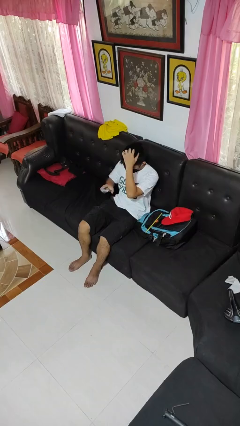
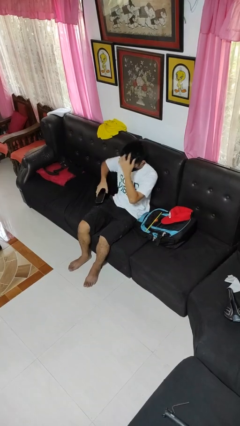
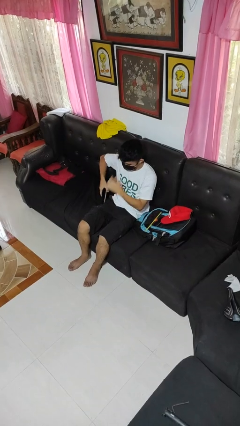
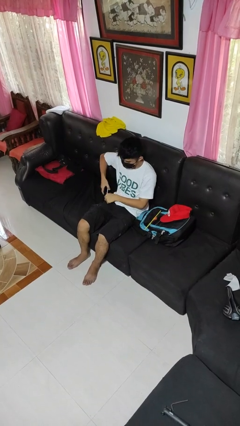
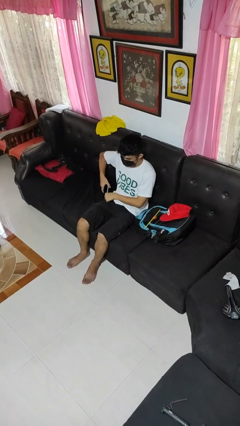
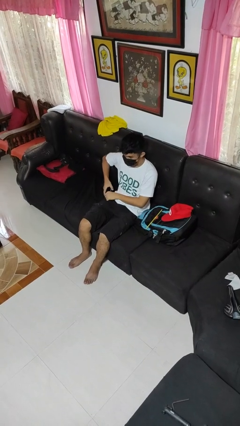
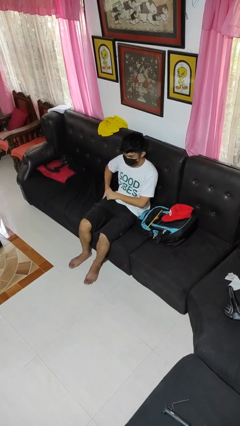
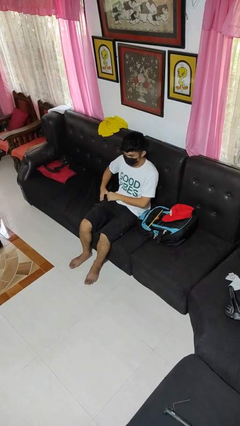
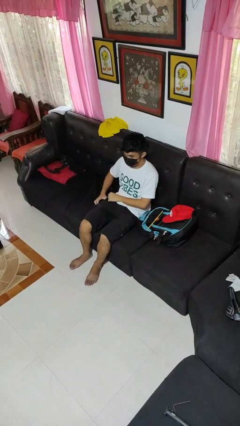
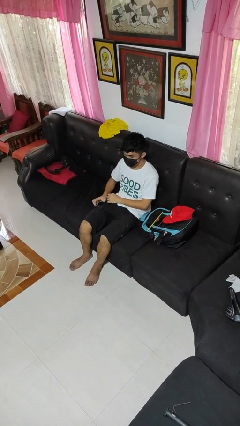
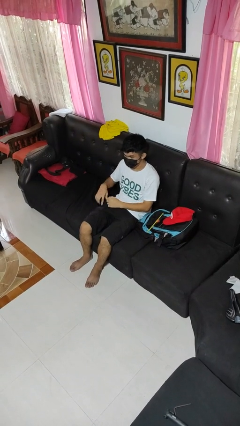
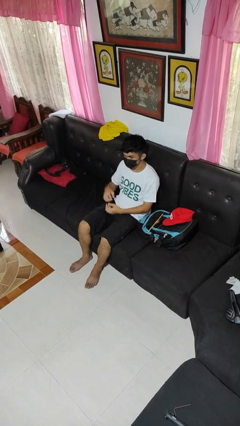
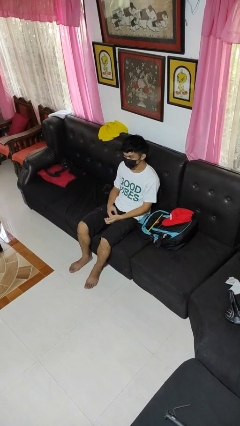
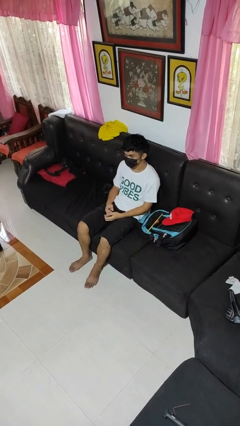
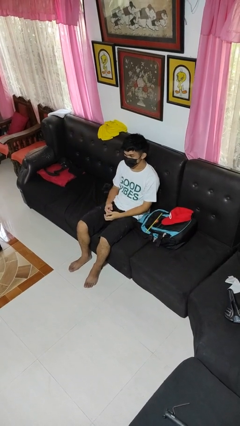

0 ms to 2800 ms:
person puts phone into pocket

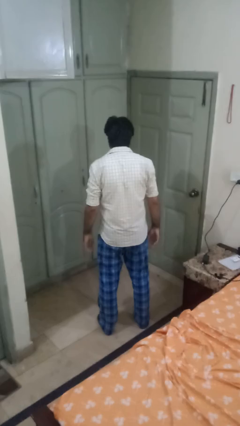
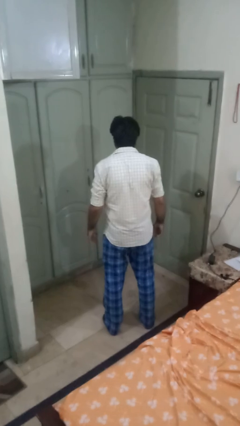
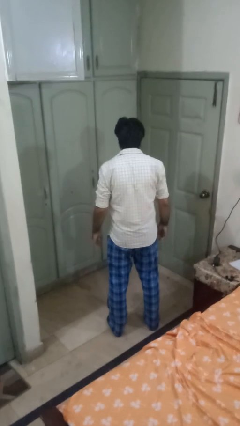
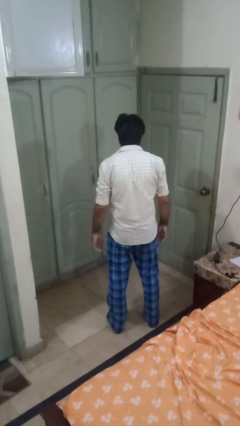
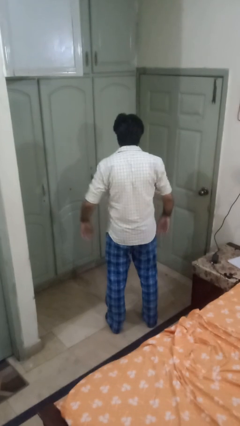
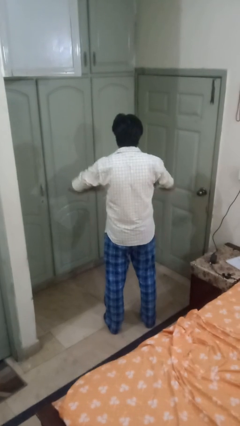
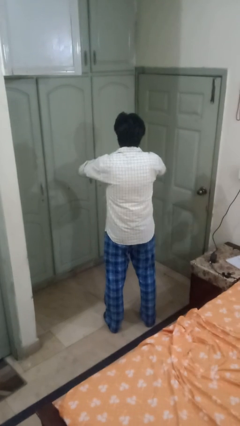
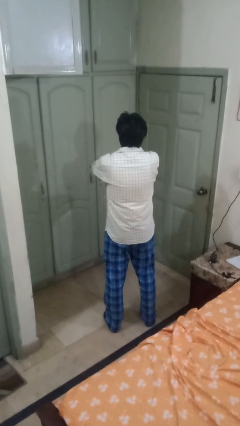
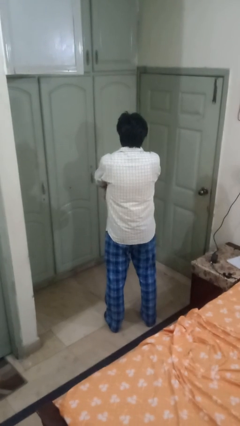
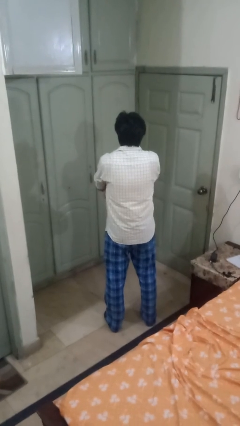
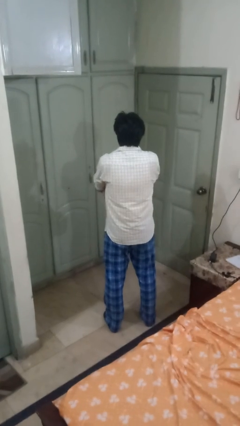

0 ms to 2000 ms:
person crosses arms

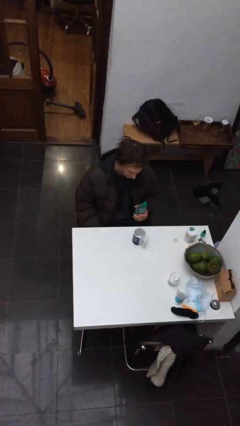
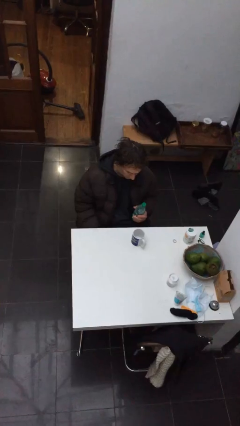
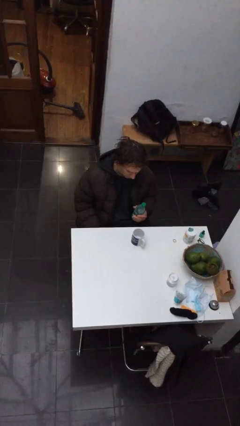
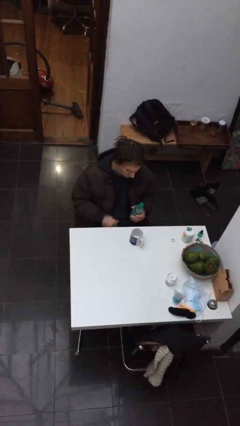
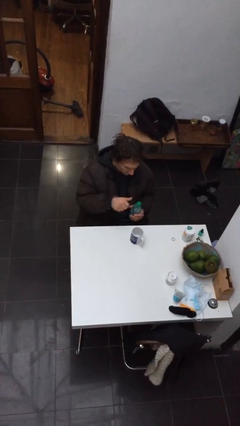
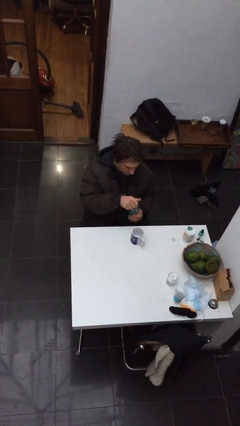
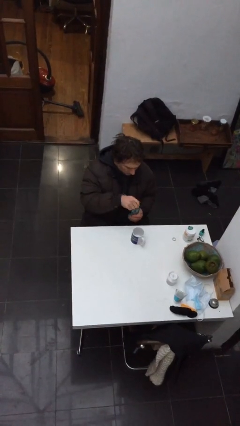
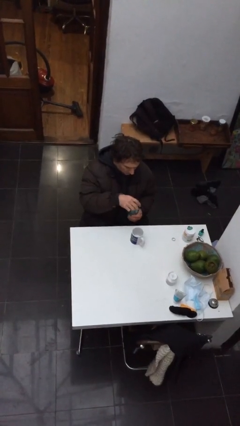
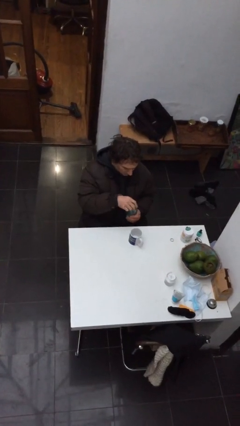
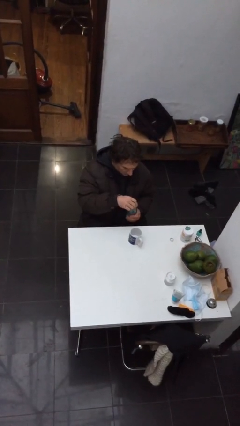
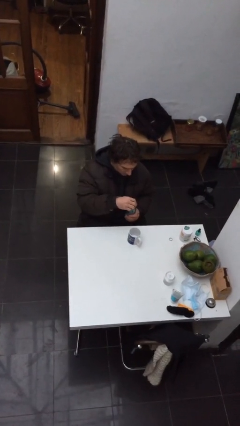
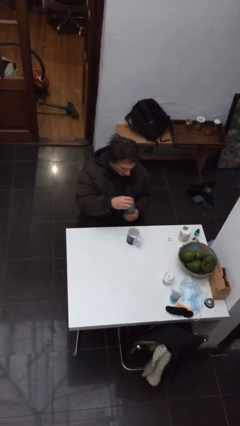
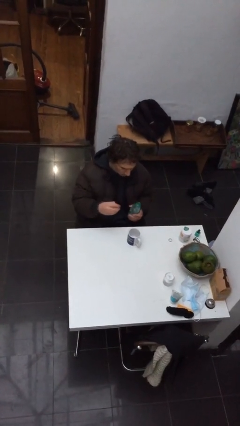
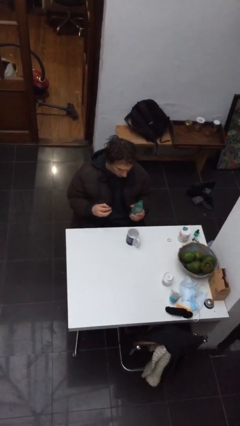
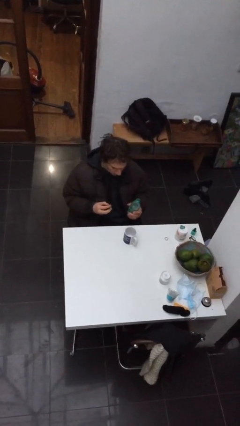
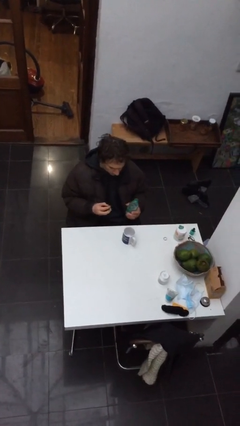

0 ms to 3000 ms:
person unscrews lid from bottle

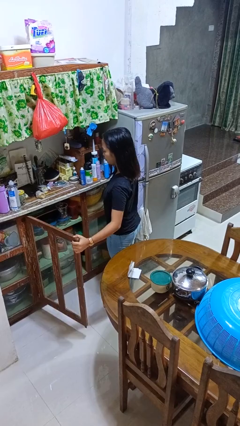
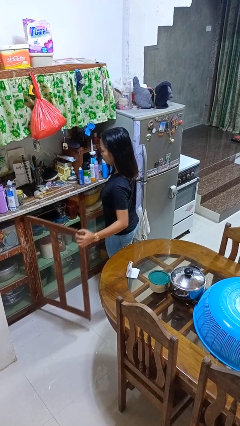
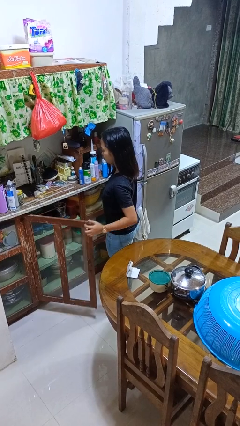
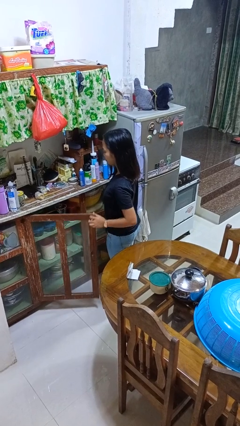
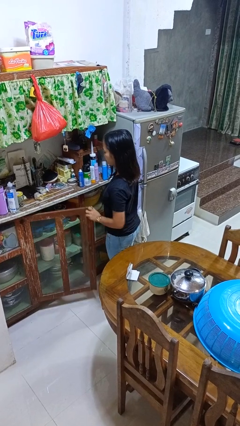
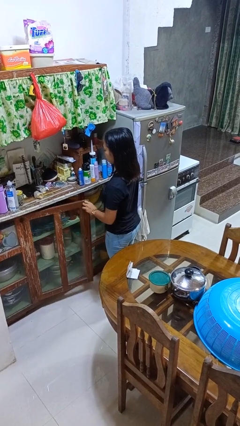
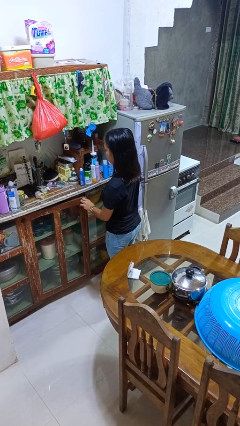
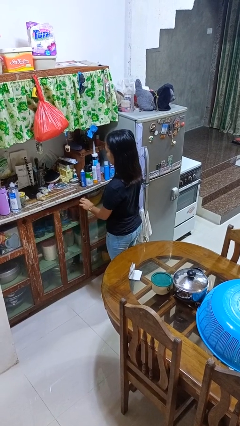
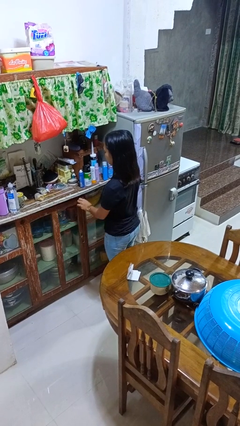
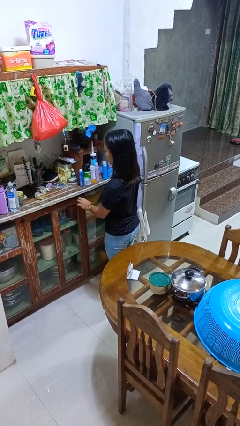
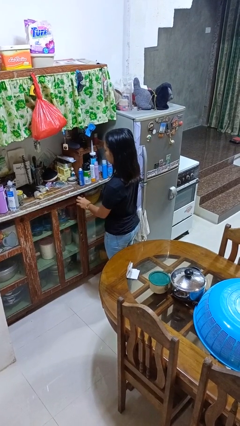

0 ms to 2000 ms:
person closes cabinet

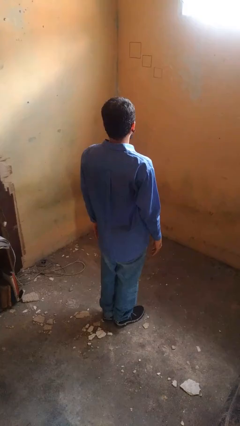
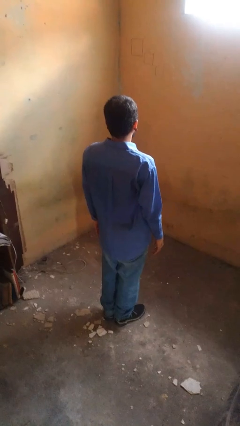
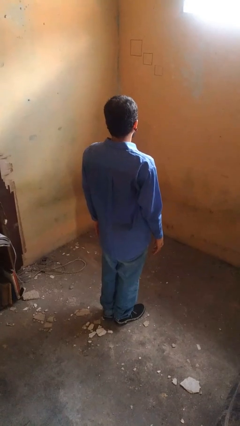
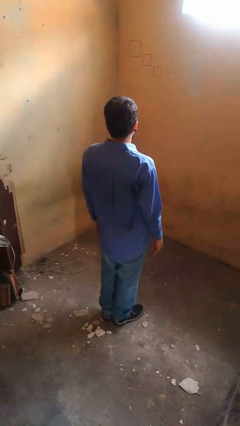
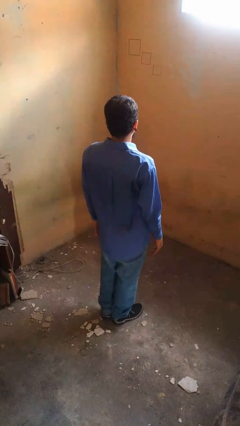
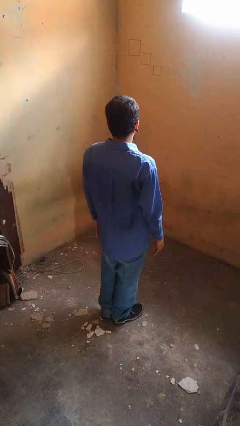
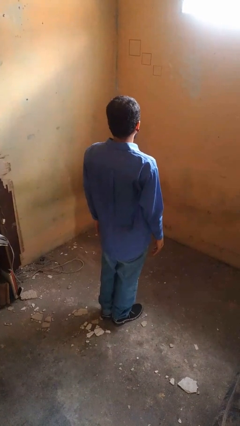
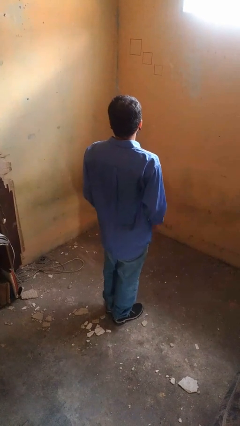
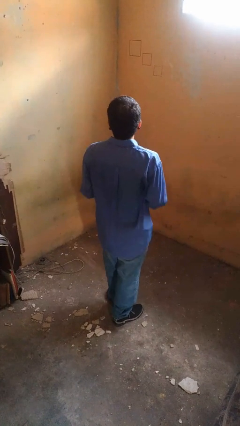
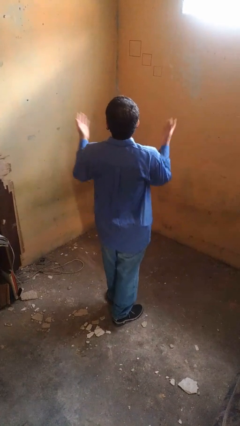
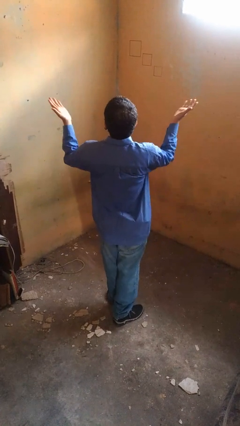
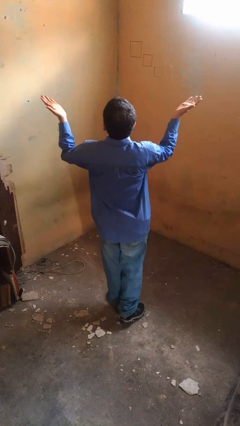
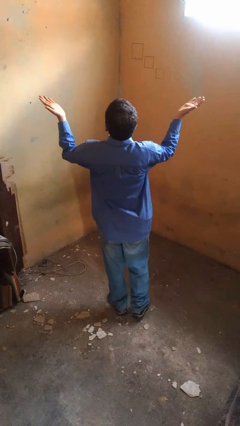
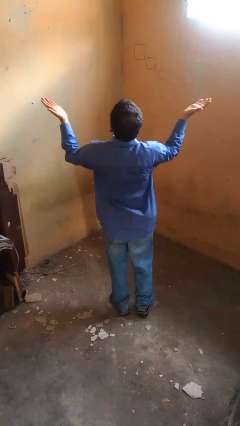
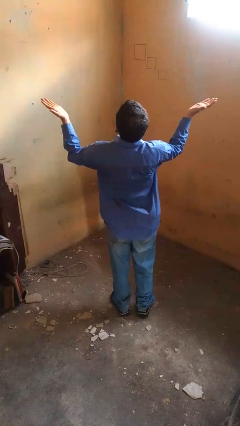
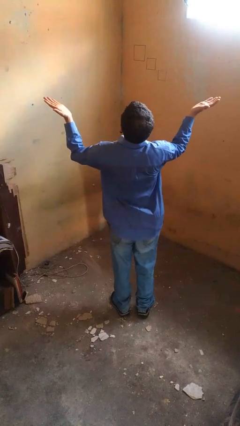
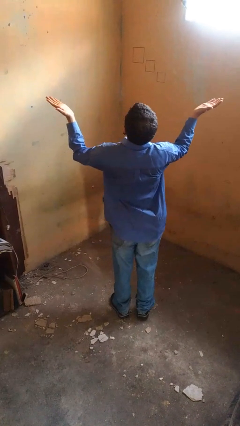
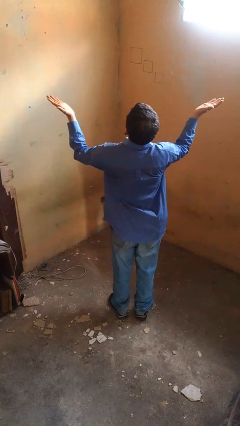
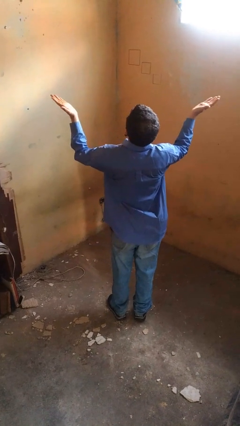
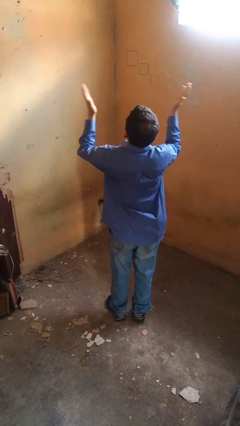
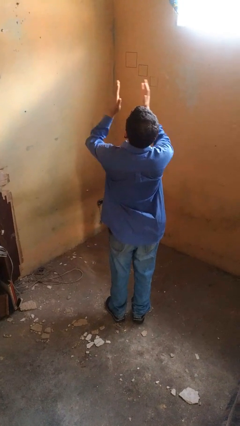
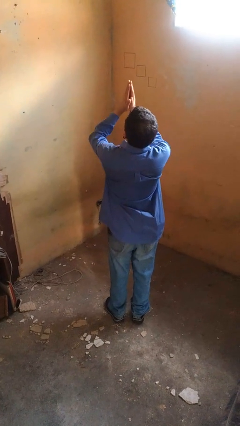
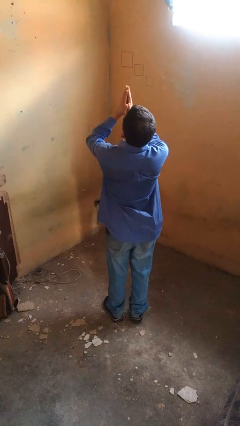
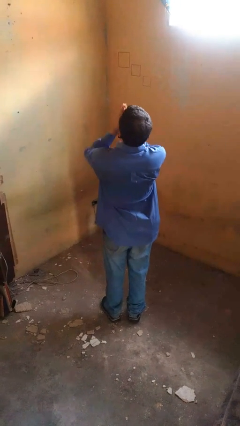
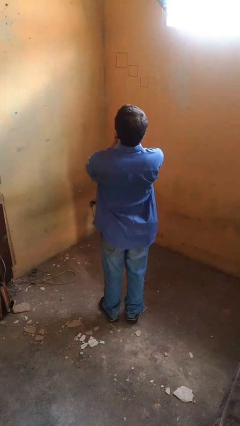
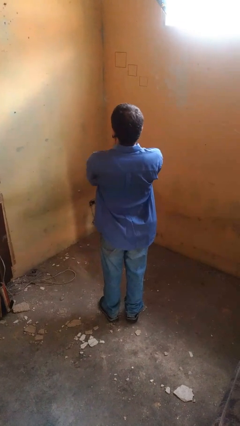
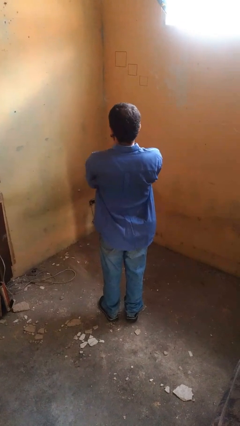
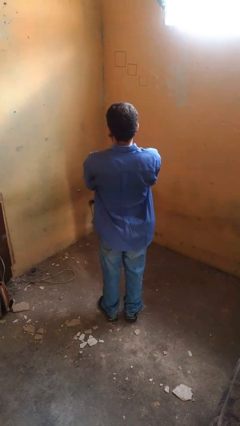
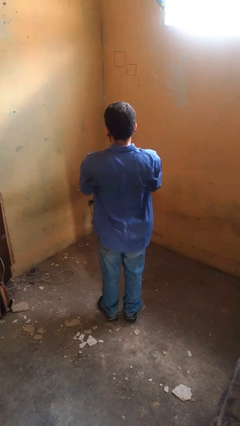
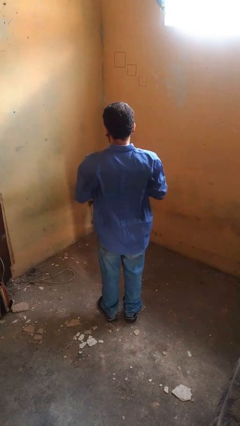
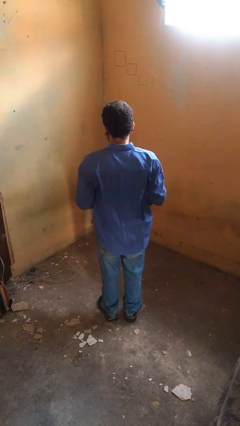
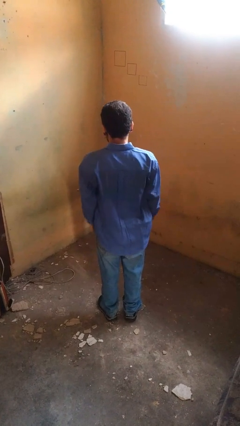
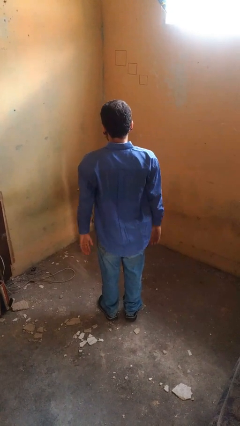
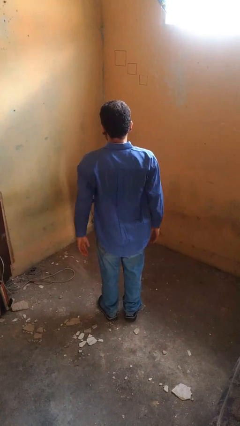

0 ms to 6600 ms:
person prays

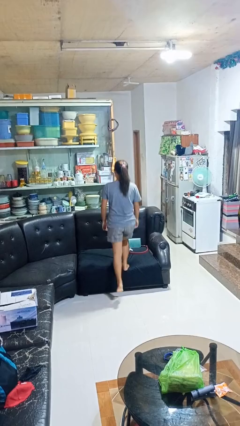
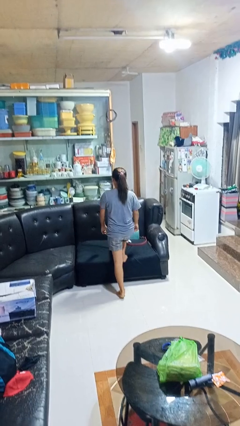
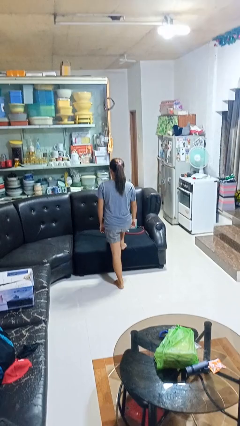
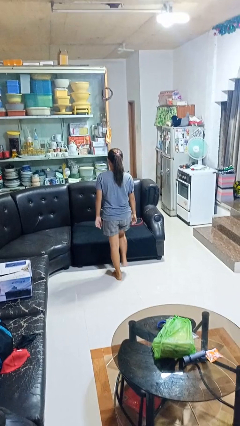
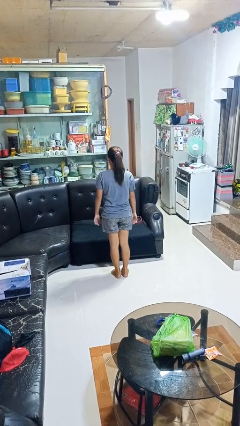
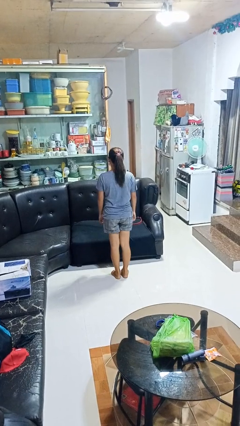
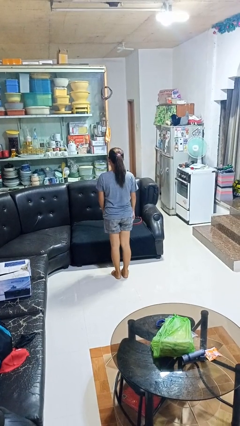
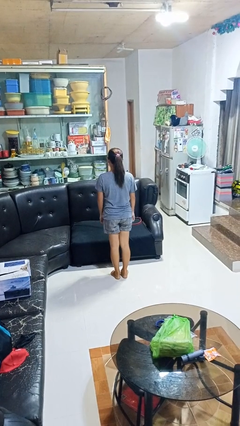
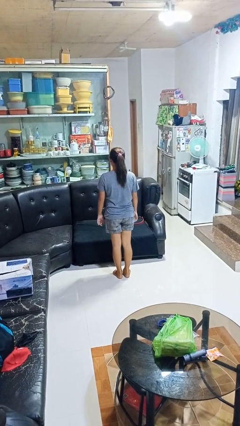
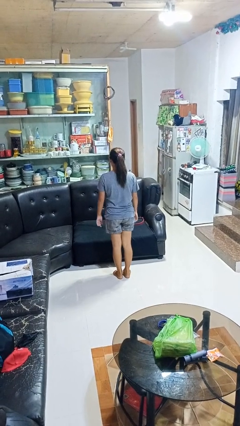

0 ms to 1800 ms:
person climbs off couch
